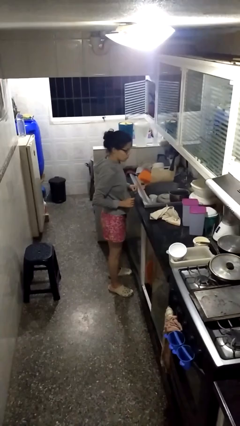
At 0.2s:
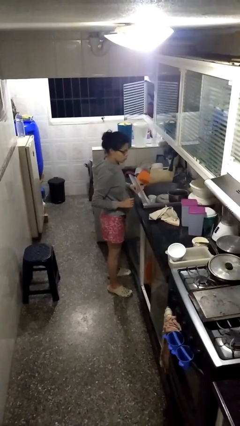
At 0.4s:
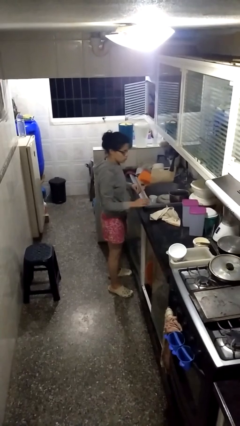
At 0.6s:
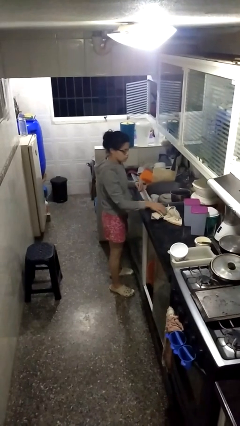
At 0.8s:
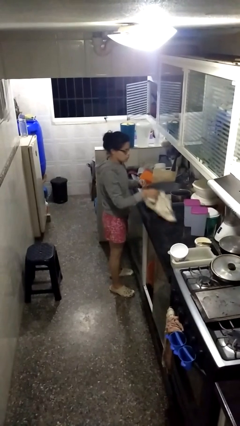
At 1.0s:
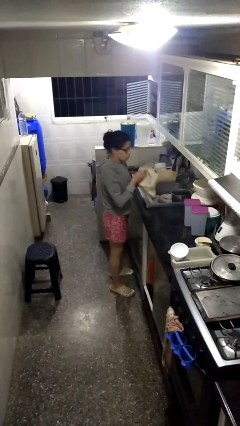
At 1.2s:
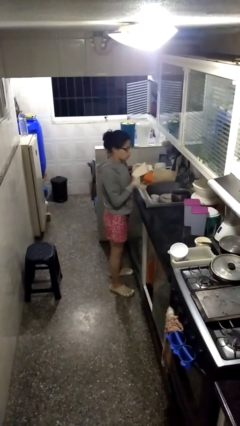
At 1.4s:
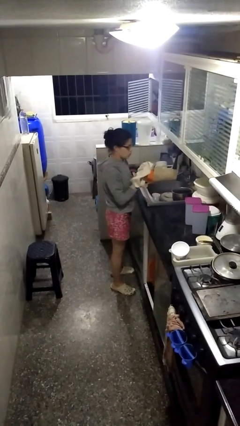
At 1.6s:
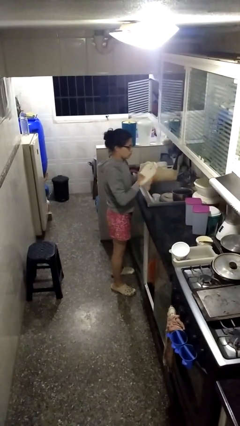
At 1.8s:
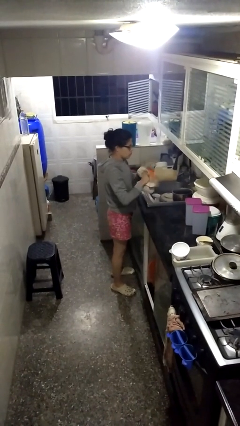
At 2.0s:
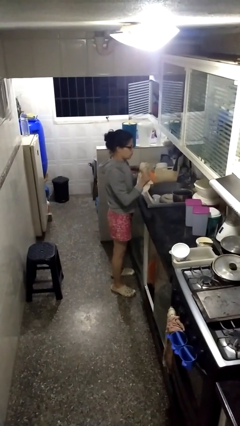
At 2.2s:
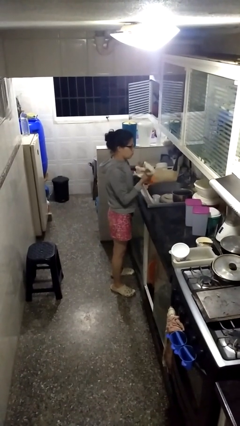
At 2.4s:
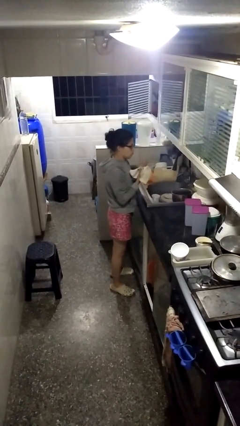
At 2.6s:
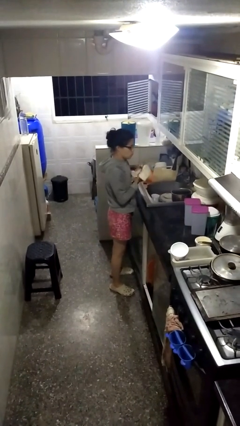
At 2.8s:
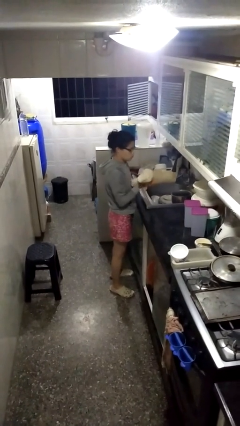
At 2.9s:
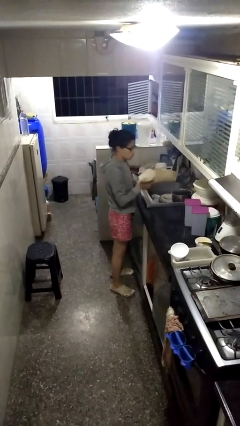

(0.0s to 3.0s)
person dries hands with towel

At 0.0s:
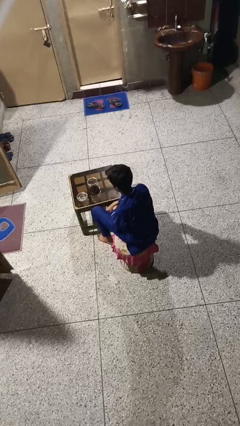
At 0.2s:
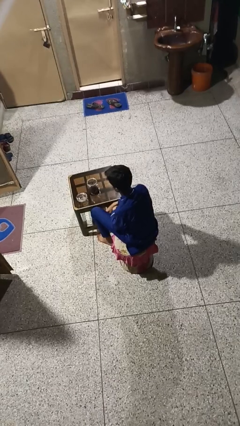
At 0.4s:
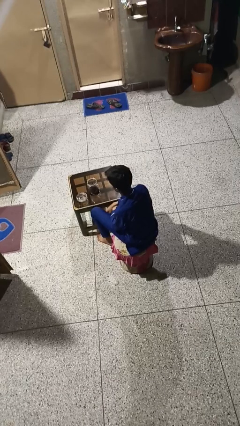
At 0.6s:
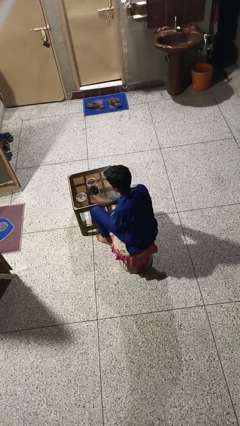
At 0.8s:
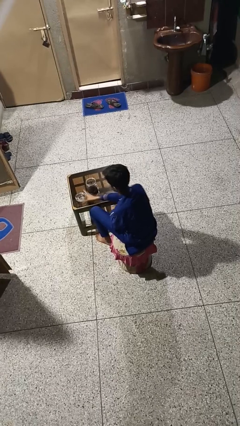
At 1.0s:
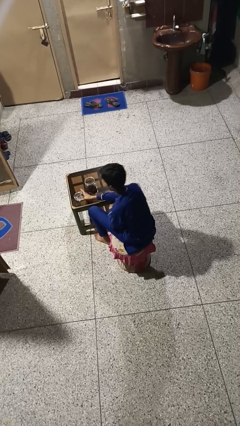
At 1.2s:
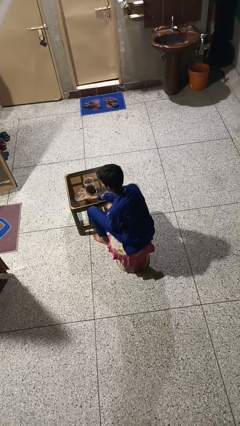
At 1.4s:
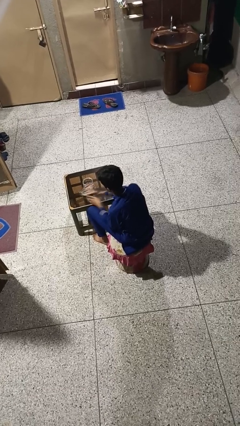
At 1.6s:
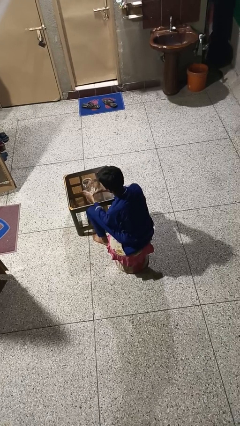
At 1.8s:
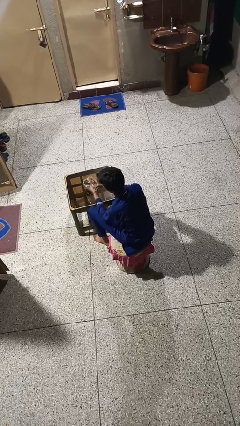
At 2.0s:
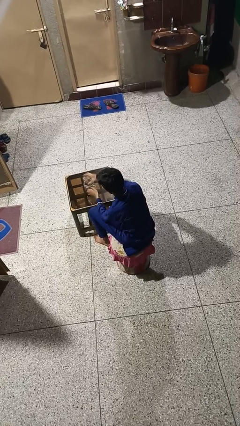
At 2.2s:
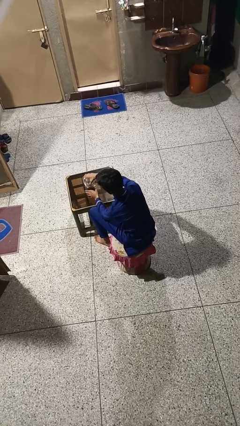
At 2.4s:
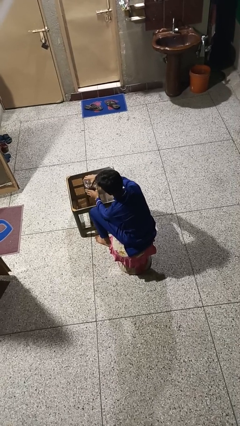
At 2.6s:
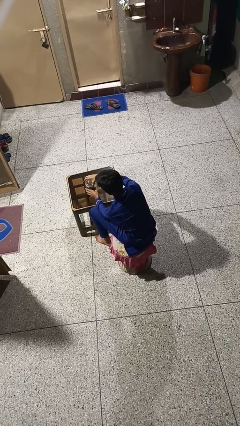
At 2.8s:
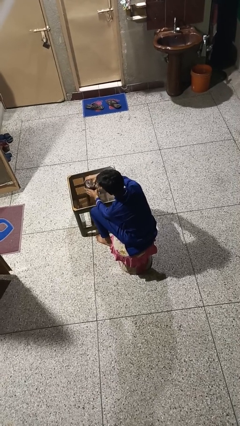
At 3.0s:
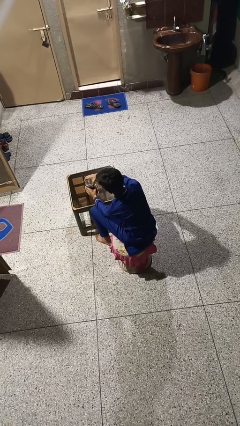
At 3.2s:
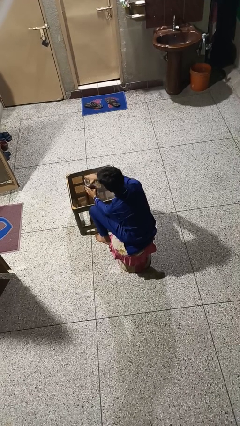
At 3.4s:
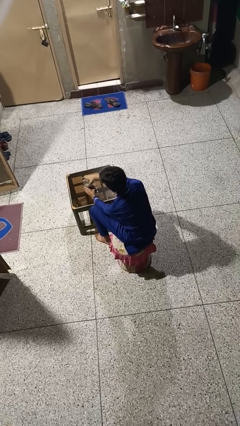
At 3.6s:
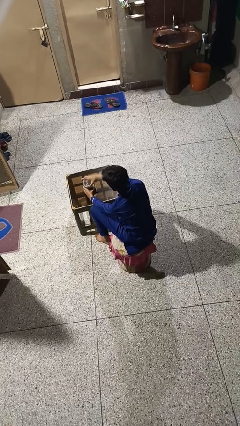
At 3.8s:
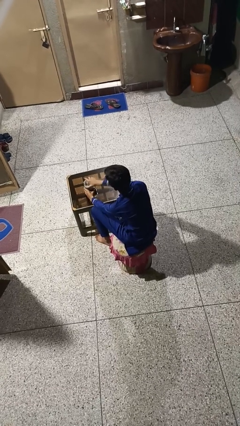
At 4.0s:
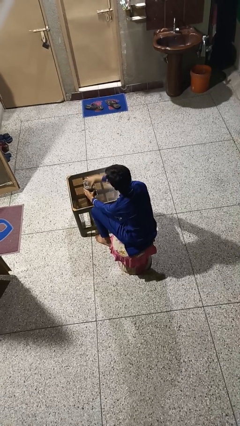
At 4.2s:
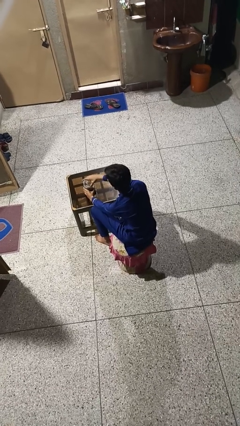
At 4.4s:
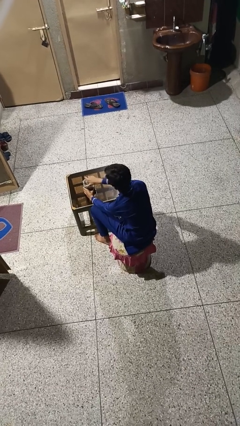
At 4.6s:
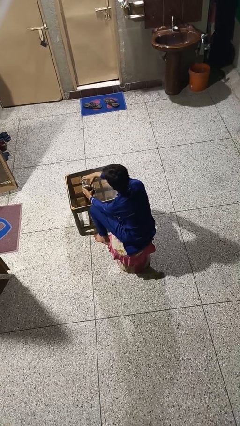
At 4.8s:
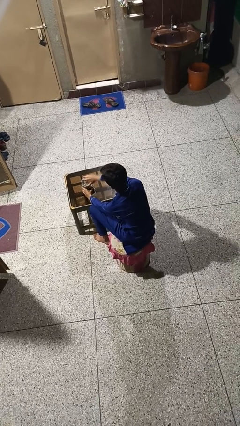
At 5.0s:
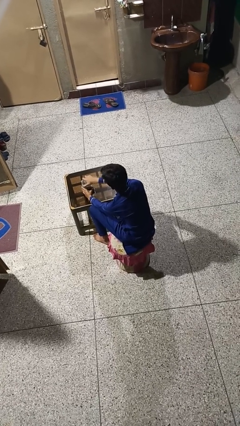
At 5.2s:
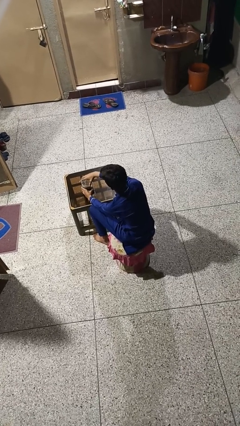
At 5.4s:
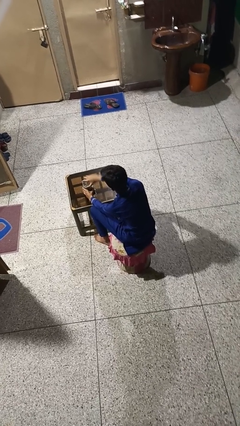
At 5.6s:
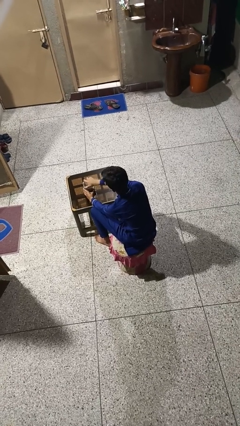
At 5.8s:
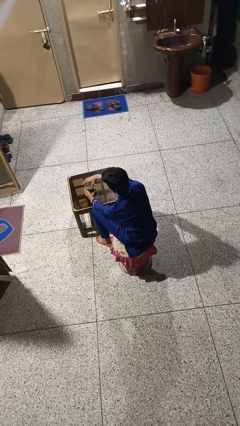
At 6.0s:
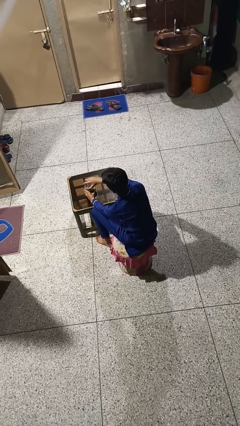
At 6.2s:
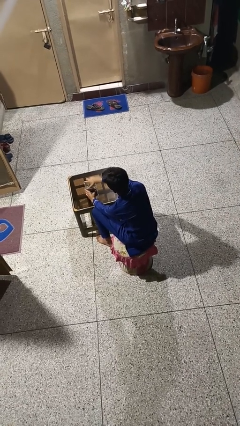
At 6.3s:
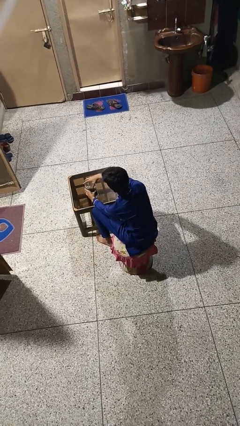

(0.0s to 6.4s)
person closes jar

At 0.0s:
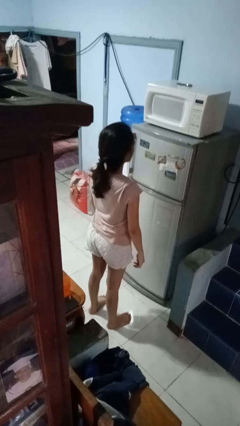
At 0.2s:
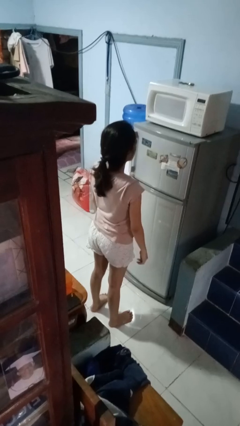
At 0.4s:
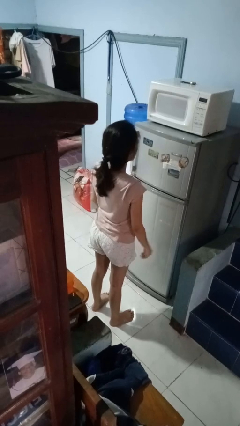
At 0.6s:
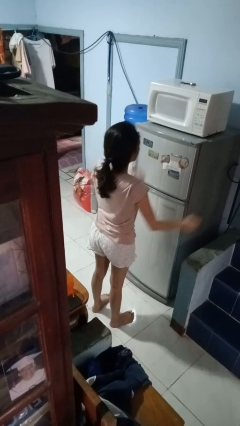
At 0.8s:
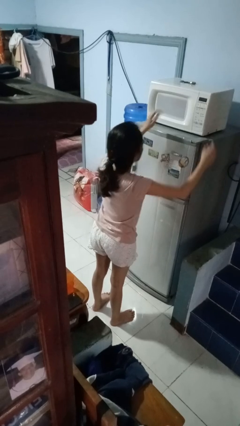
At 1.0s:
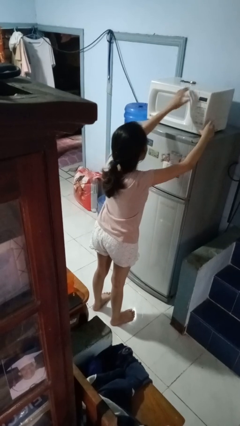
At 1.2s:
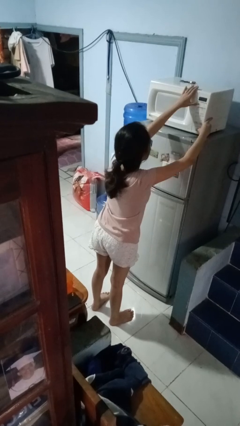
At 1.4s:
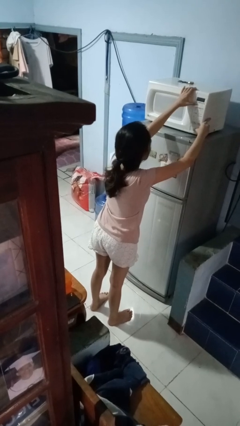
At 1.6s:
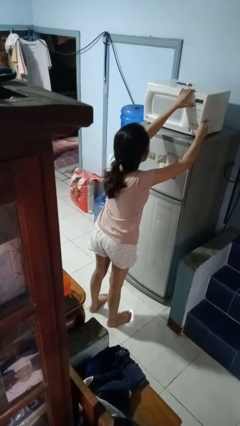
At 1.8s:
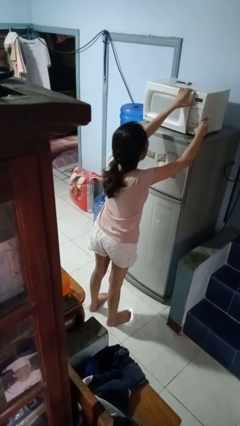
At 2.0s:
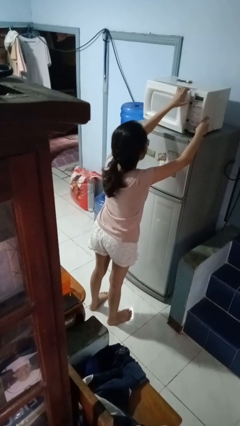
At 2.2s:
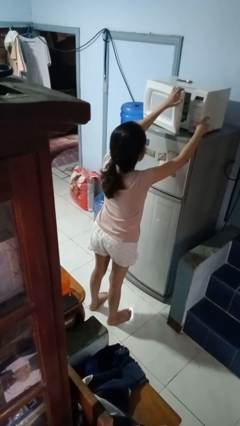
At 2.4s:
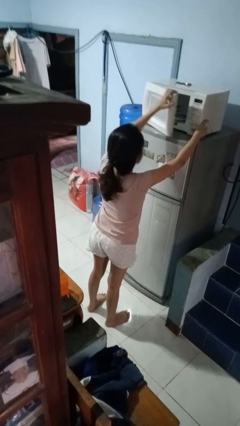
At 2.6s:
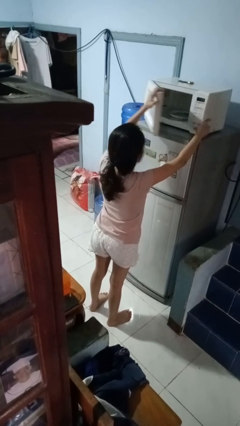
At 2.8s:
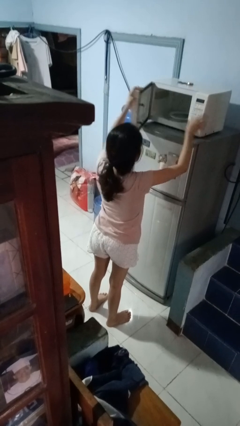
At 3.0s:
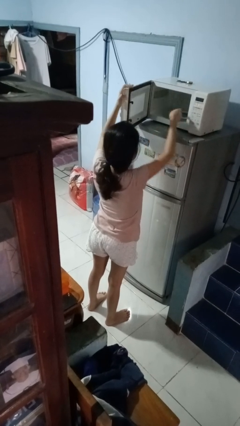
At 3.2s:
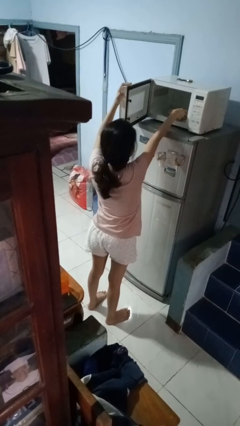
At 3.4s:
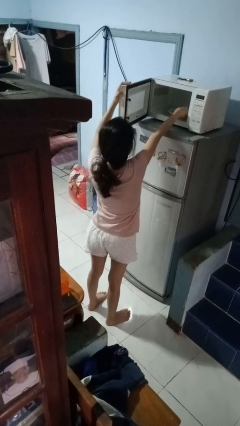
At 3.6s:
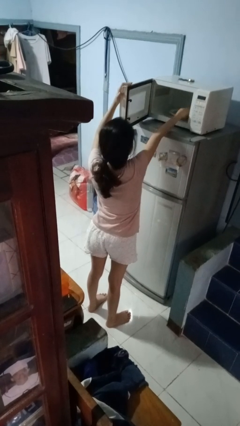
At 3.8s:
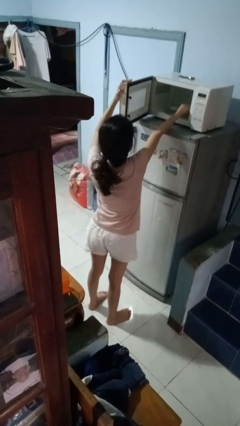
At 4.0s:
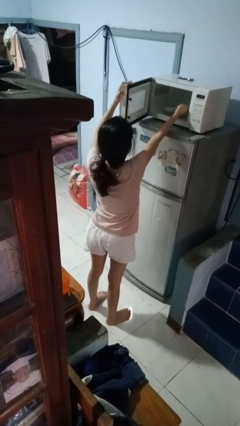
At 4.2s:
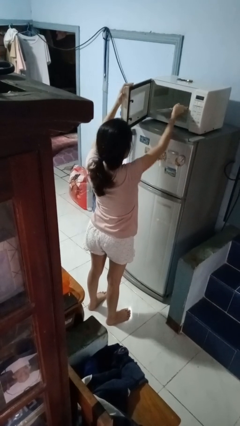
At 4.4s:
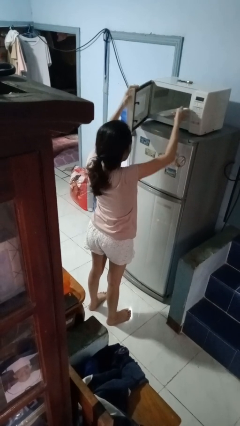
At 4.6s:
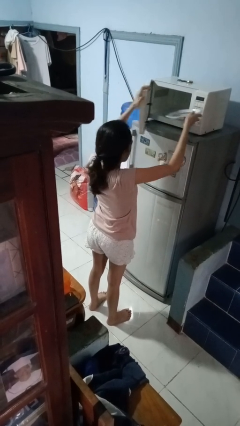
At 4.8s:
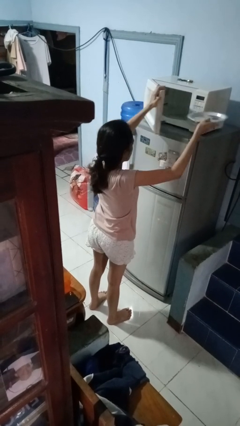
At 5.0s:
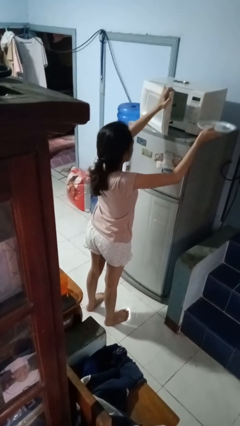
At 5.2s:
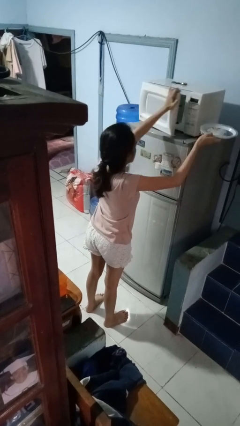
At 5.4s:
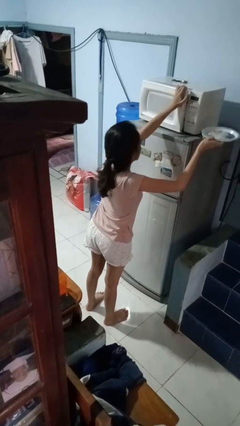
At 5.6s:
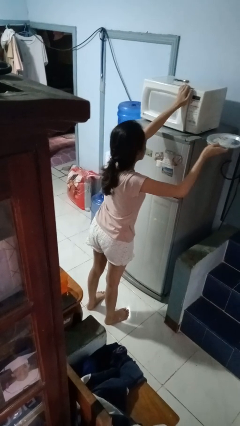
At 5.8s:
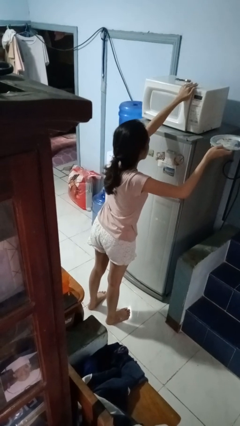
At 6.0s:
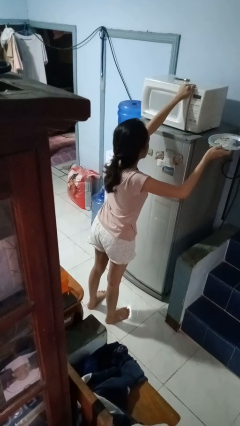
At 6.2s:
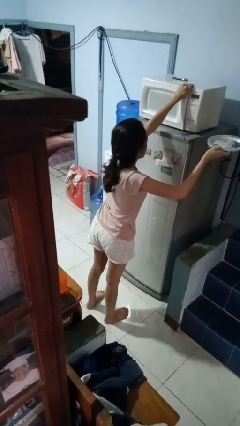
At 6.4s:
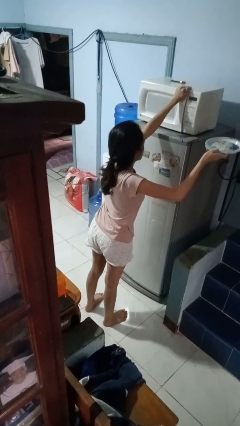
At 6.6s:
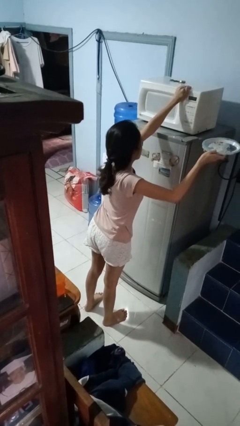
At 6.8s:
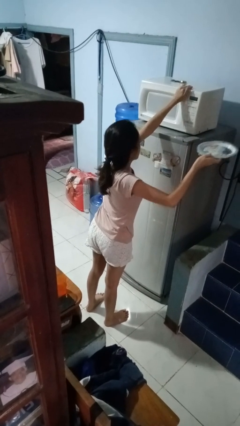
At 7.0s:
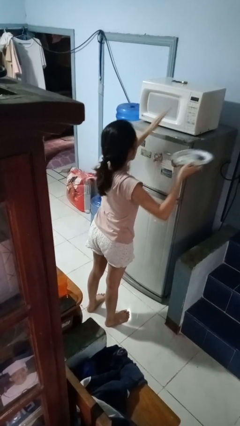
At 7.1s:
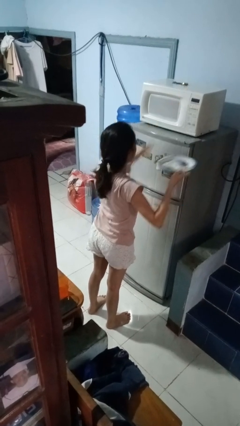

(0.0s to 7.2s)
person takes object from microwave

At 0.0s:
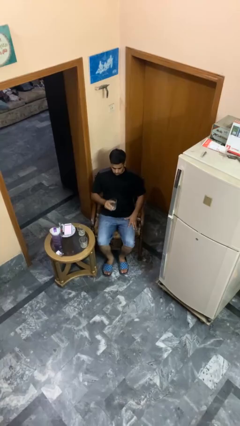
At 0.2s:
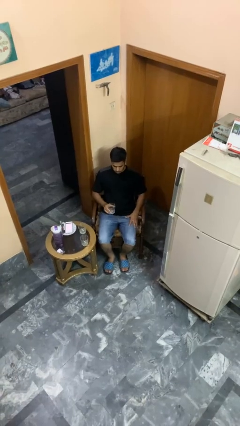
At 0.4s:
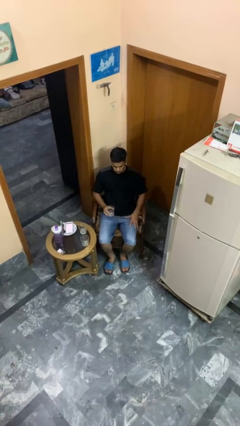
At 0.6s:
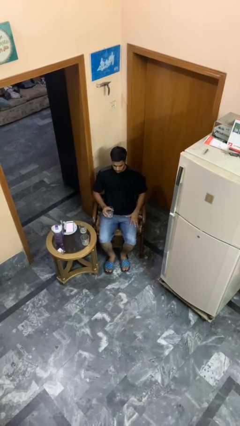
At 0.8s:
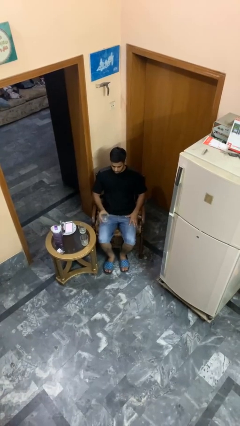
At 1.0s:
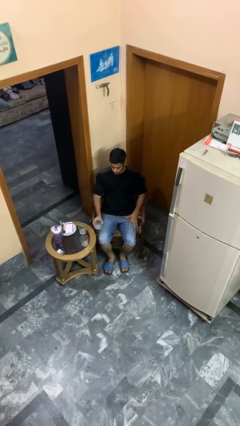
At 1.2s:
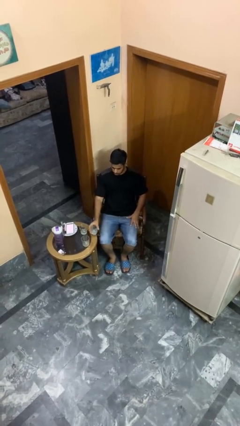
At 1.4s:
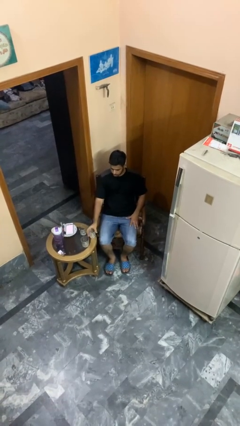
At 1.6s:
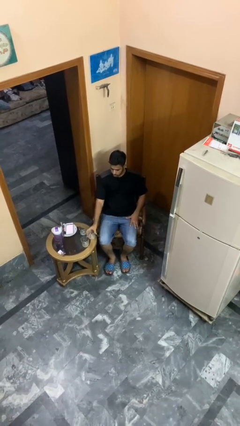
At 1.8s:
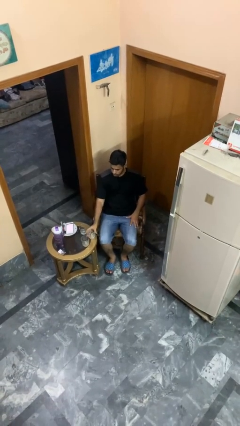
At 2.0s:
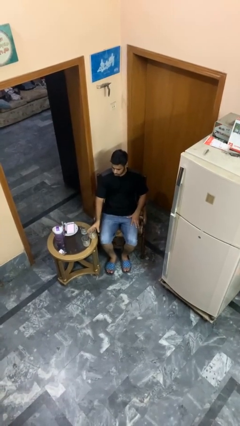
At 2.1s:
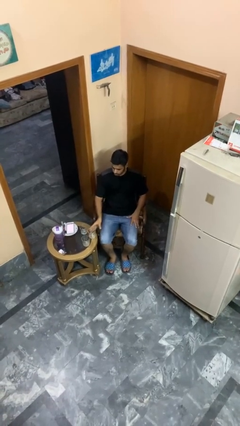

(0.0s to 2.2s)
person puts down object on table
